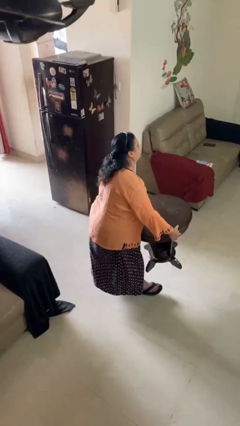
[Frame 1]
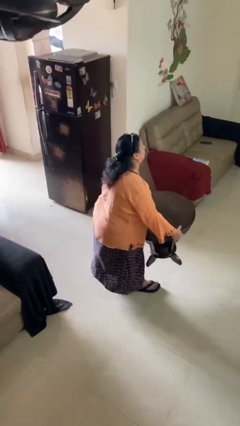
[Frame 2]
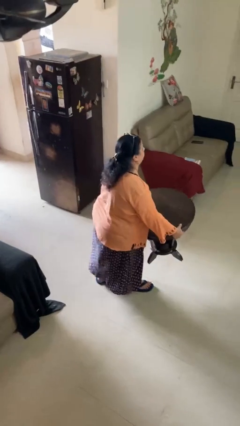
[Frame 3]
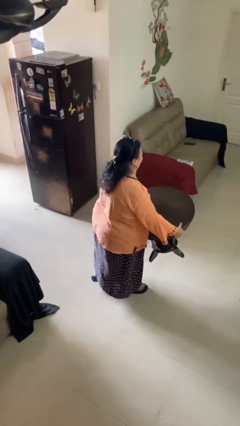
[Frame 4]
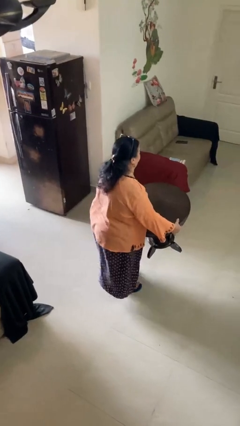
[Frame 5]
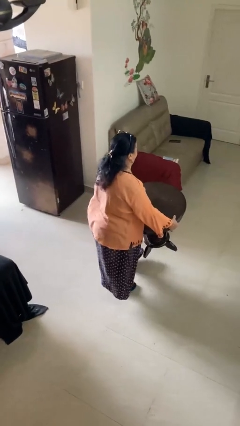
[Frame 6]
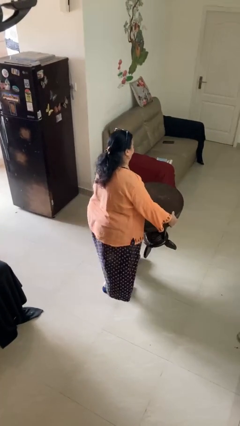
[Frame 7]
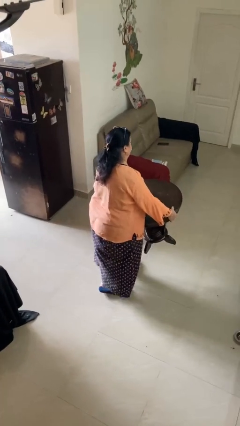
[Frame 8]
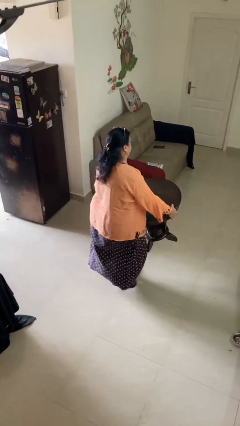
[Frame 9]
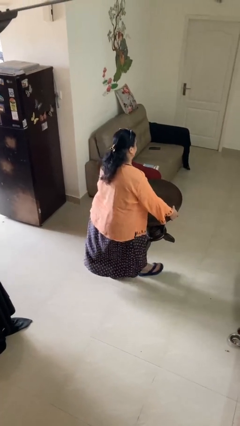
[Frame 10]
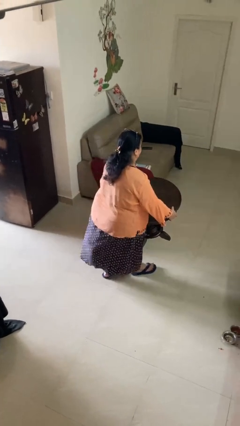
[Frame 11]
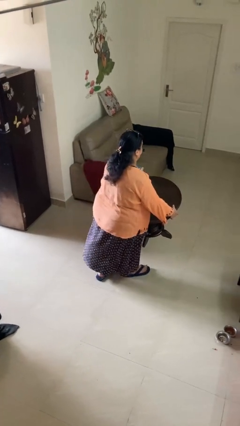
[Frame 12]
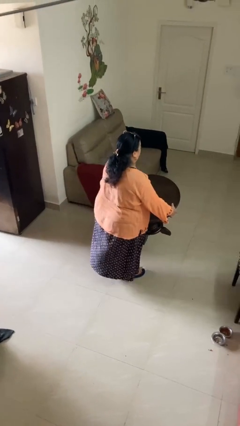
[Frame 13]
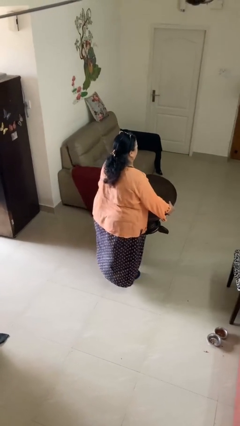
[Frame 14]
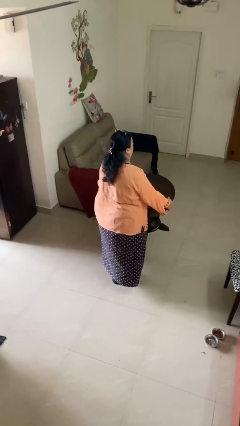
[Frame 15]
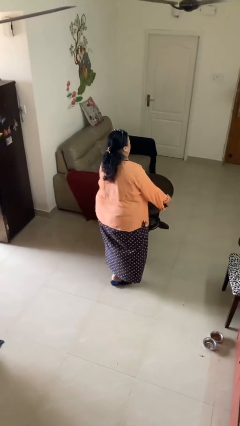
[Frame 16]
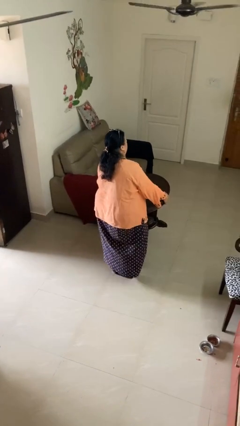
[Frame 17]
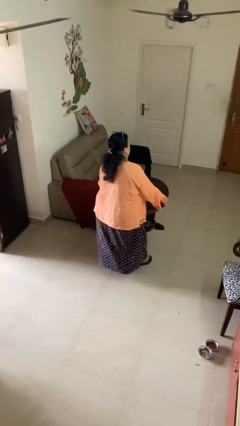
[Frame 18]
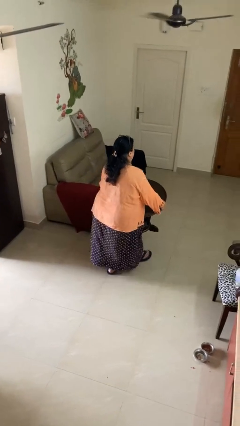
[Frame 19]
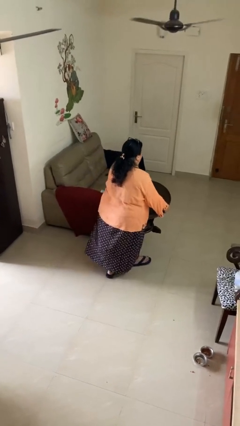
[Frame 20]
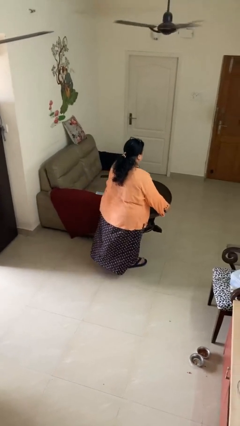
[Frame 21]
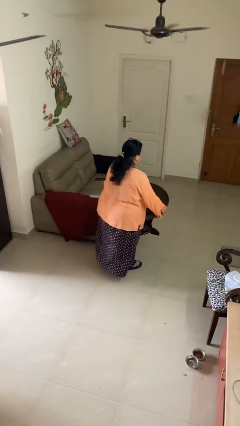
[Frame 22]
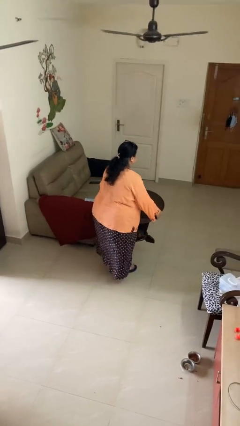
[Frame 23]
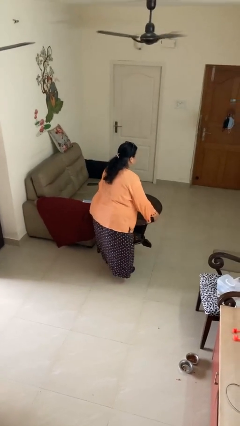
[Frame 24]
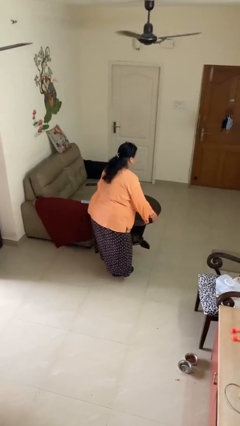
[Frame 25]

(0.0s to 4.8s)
person carries heavy object

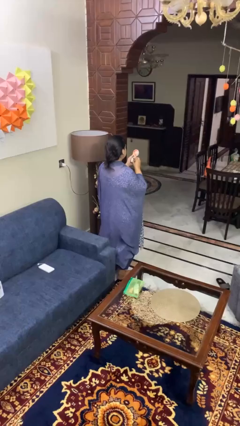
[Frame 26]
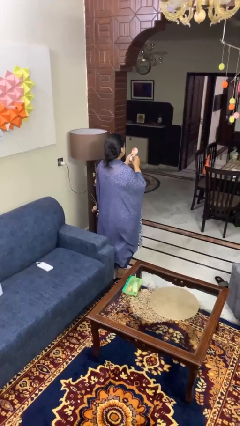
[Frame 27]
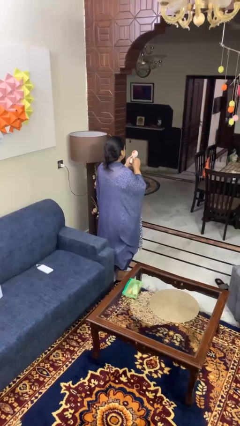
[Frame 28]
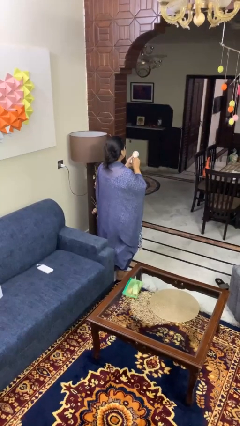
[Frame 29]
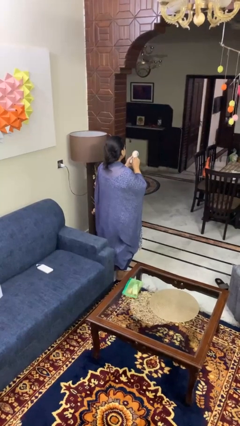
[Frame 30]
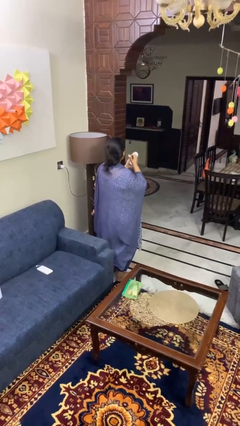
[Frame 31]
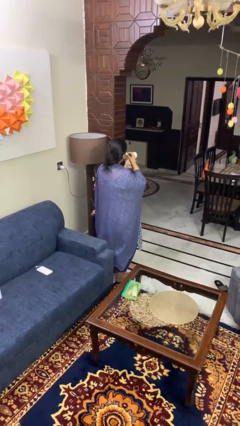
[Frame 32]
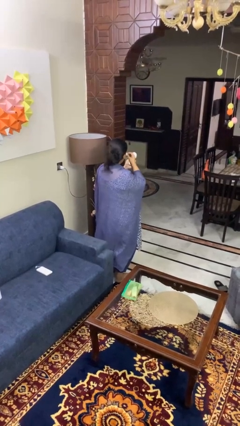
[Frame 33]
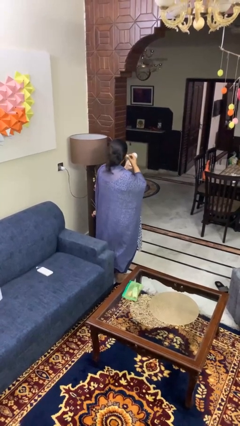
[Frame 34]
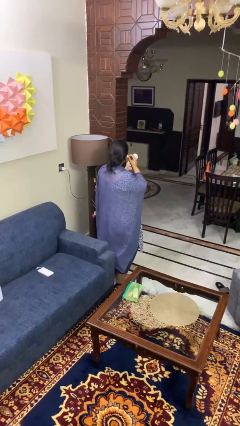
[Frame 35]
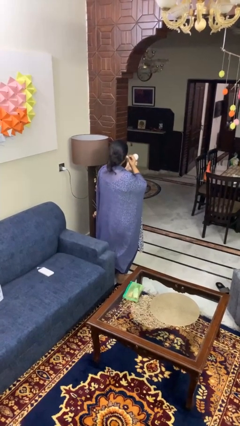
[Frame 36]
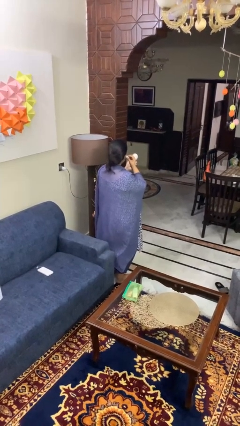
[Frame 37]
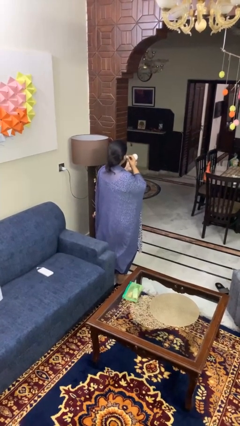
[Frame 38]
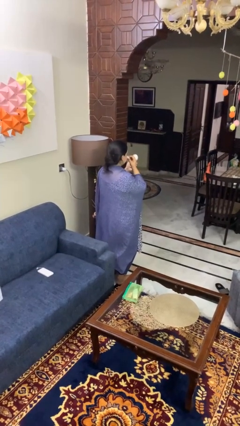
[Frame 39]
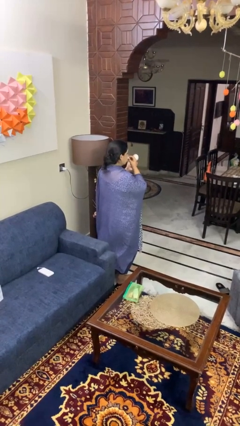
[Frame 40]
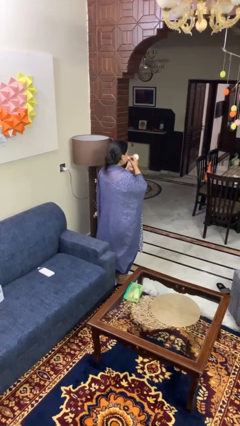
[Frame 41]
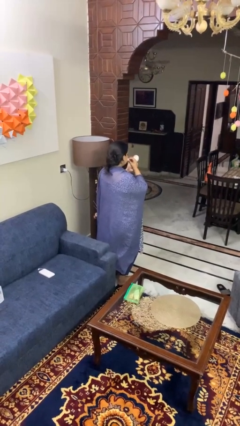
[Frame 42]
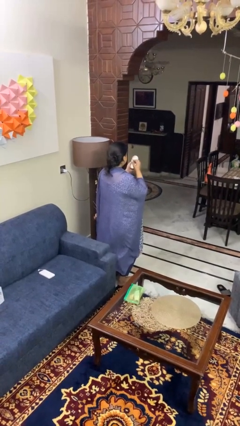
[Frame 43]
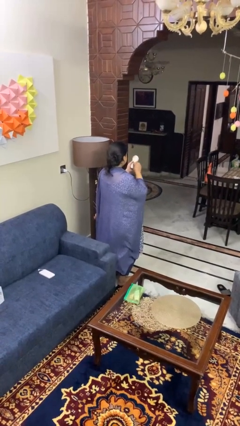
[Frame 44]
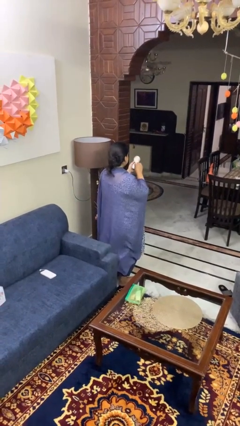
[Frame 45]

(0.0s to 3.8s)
person applies foundation makeup

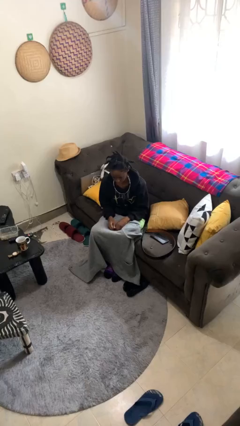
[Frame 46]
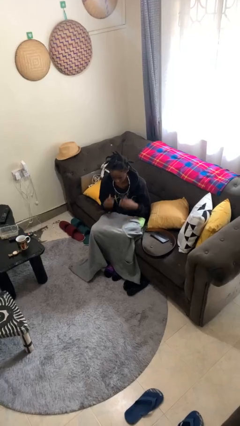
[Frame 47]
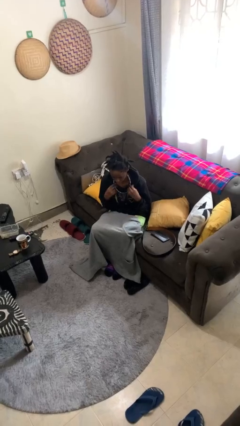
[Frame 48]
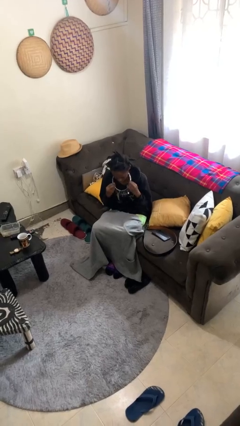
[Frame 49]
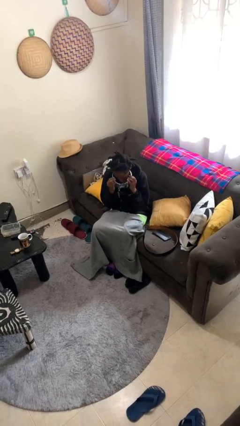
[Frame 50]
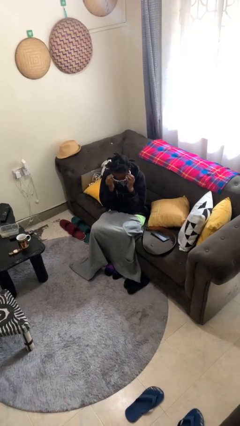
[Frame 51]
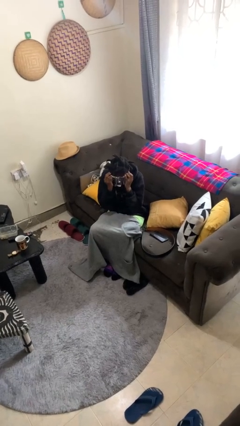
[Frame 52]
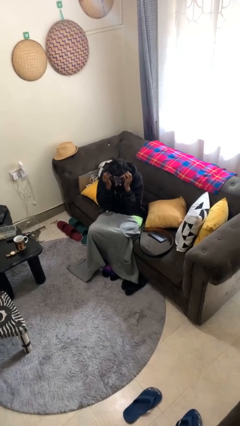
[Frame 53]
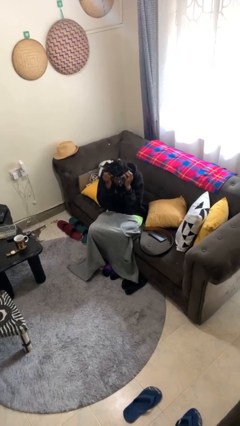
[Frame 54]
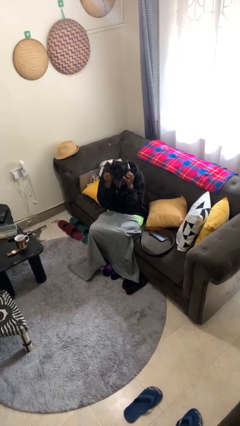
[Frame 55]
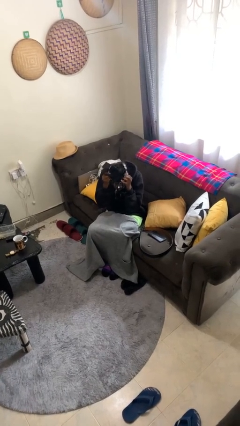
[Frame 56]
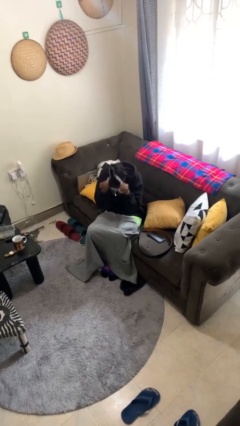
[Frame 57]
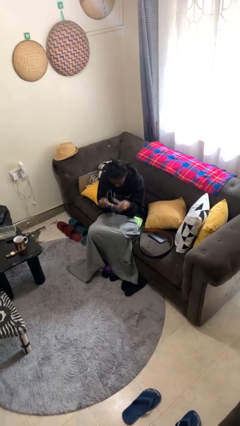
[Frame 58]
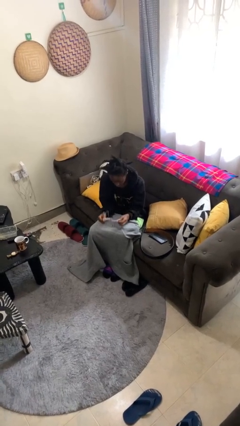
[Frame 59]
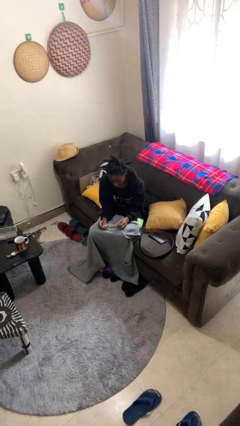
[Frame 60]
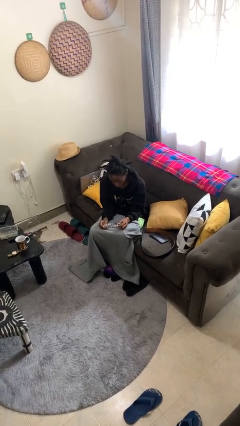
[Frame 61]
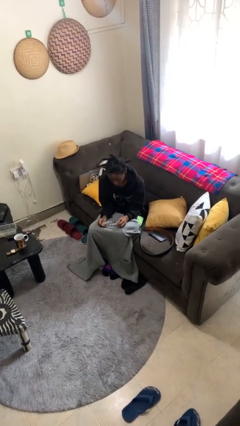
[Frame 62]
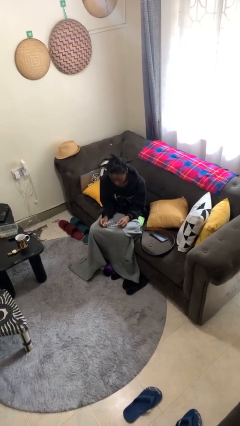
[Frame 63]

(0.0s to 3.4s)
person takes off necklace

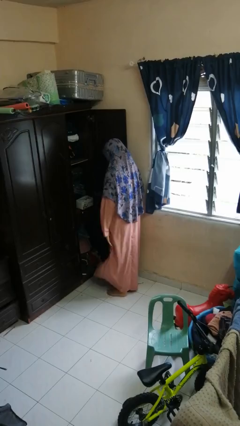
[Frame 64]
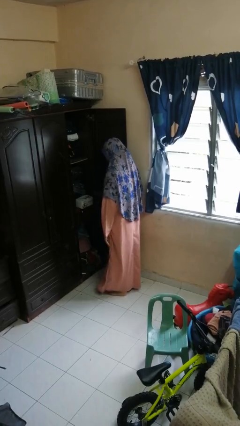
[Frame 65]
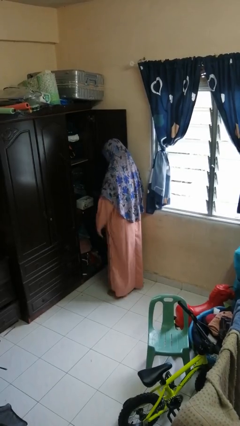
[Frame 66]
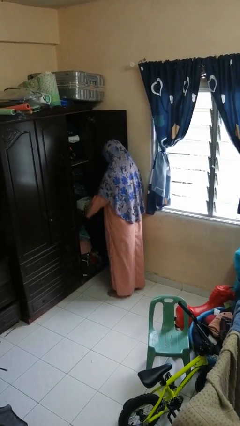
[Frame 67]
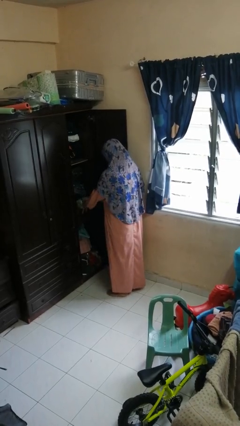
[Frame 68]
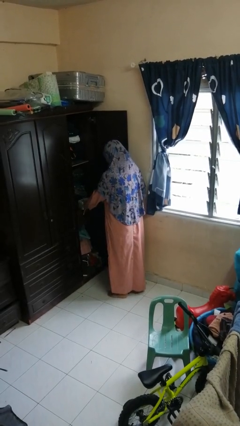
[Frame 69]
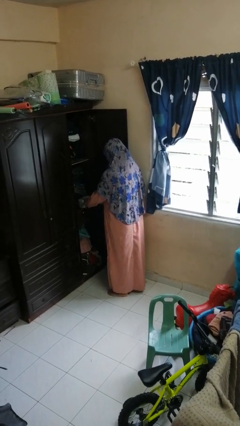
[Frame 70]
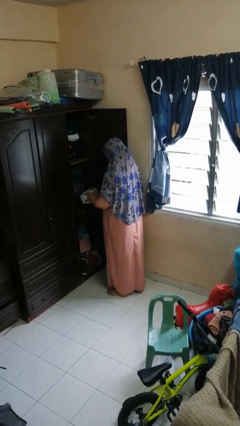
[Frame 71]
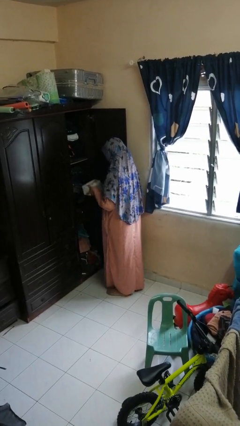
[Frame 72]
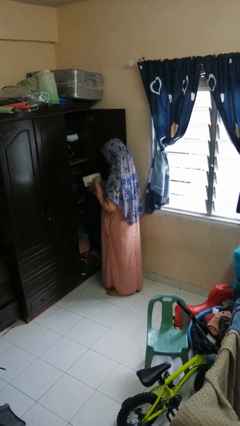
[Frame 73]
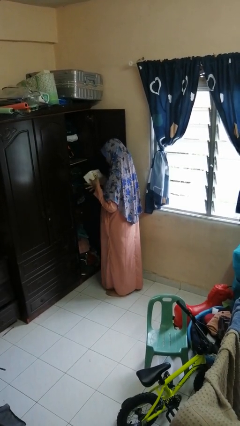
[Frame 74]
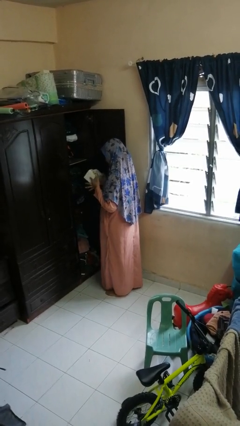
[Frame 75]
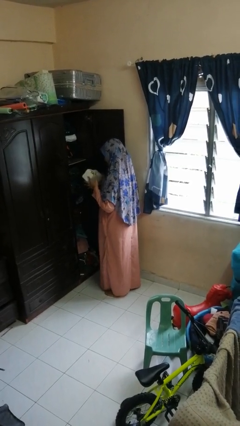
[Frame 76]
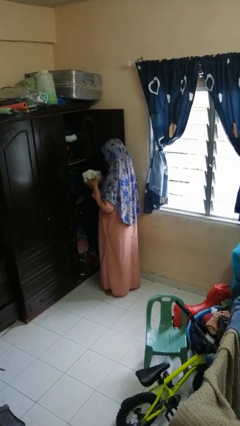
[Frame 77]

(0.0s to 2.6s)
person picks up object from cabinet

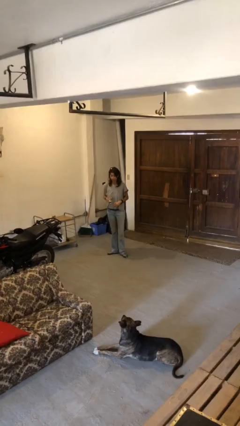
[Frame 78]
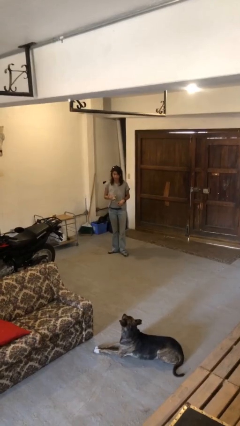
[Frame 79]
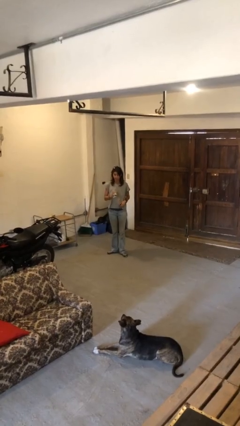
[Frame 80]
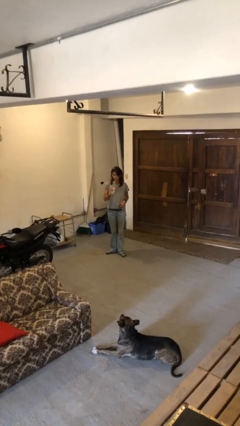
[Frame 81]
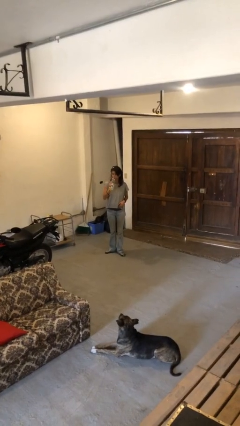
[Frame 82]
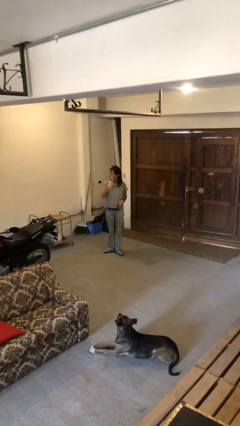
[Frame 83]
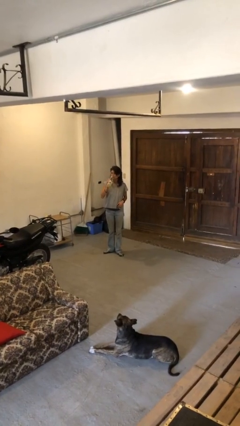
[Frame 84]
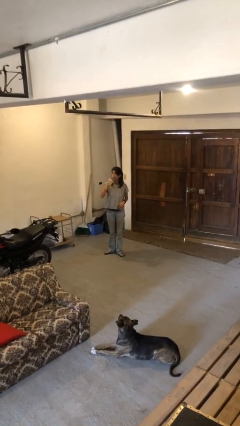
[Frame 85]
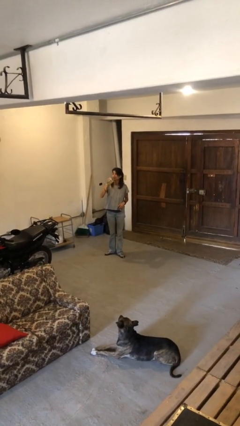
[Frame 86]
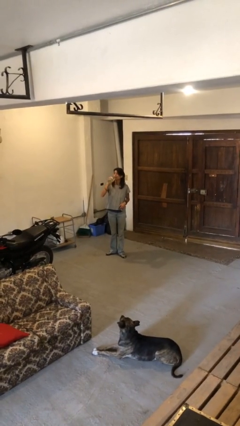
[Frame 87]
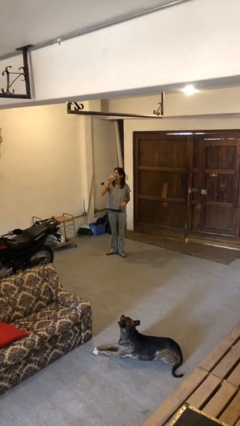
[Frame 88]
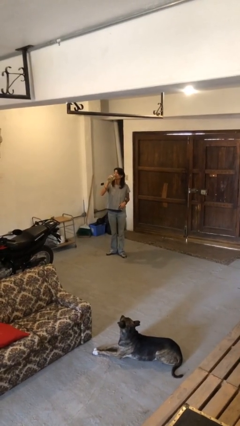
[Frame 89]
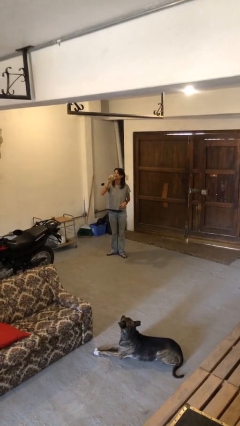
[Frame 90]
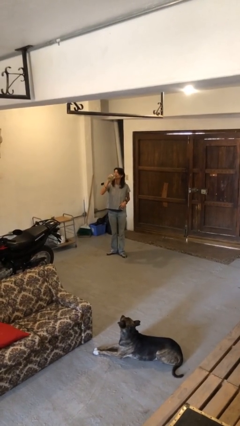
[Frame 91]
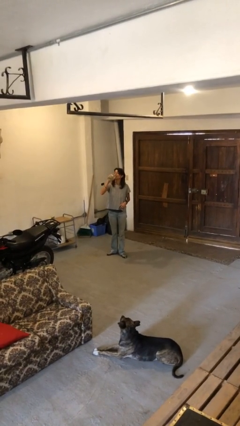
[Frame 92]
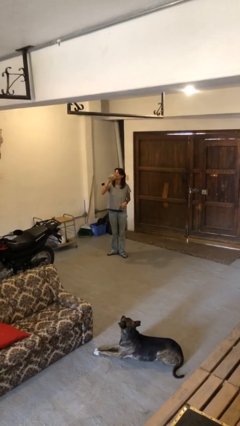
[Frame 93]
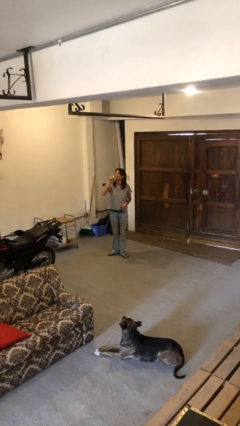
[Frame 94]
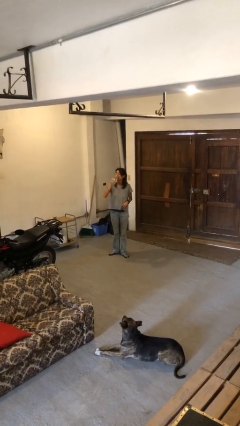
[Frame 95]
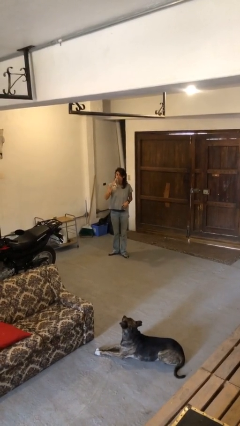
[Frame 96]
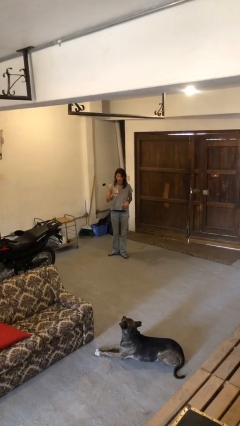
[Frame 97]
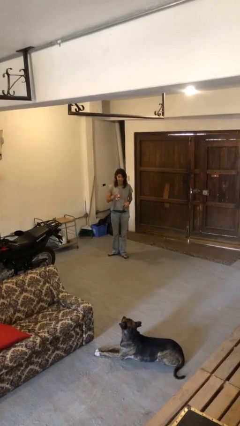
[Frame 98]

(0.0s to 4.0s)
person drinks from bottle
